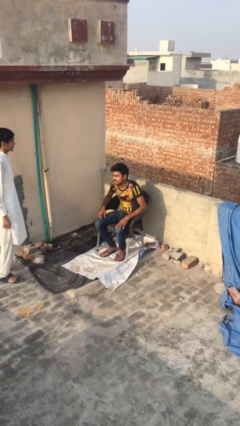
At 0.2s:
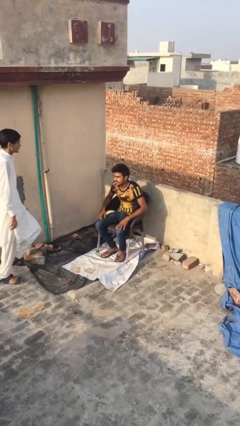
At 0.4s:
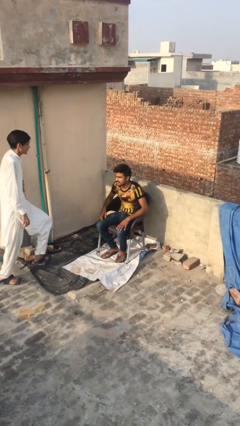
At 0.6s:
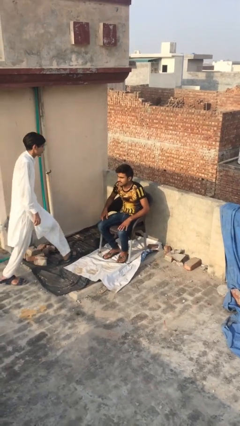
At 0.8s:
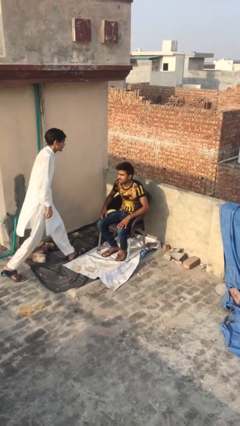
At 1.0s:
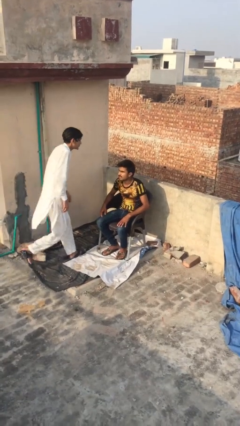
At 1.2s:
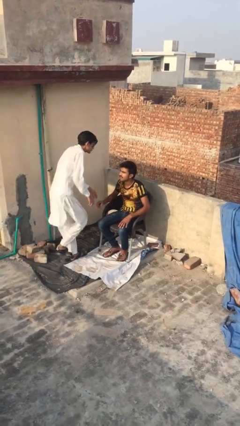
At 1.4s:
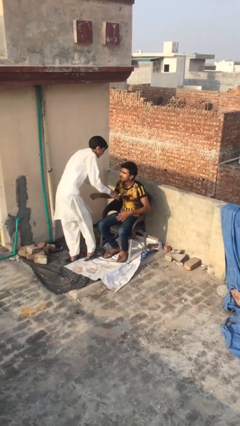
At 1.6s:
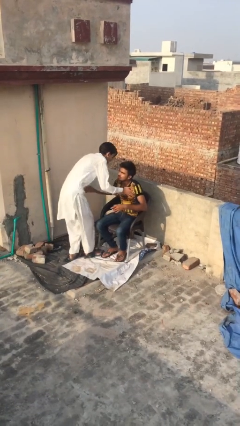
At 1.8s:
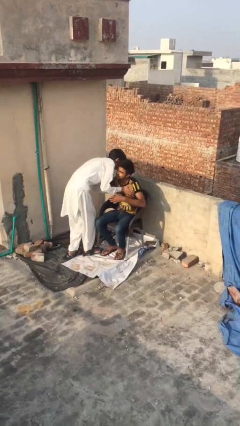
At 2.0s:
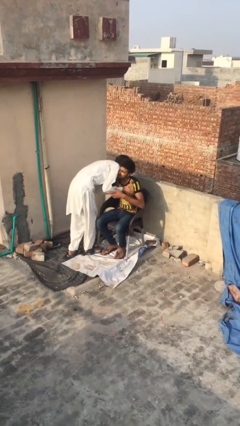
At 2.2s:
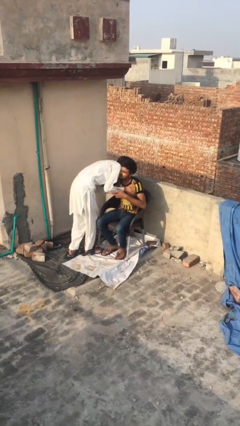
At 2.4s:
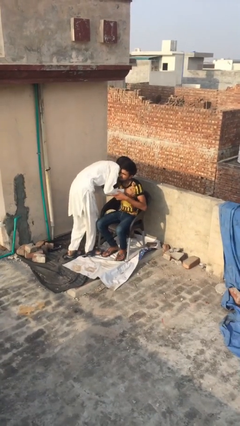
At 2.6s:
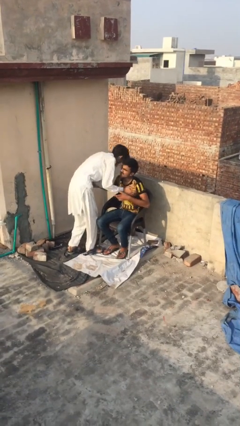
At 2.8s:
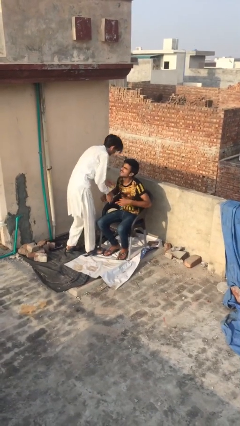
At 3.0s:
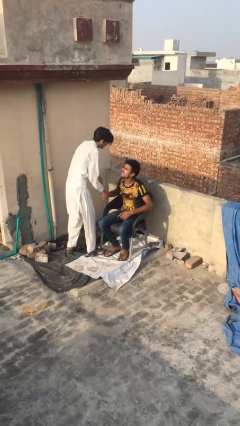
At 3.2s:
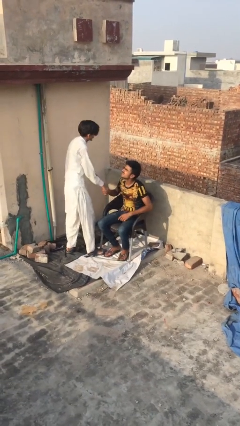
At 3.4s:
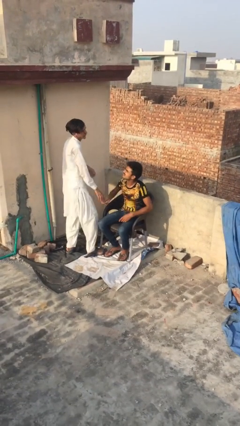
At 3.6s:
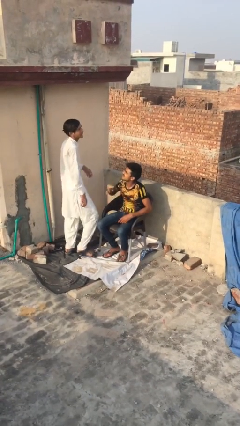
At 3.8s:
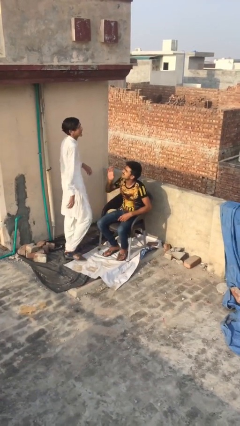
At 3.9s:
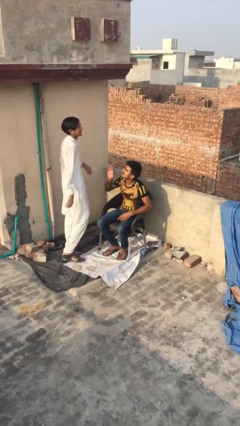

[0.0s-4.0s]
person embraces person

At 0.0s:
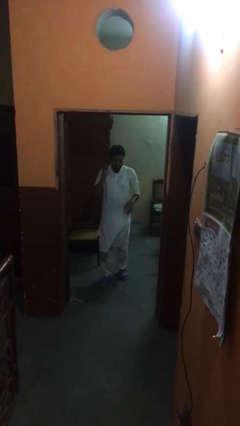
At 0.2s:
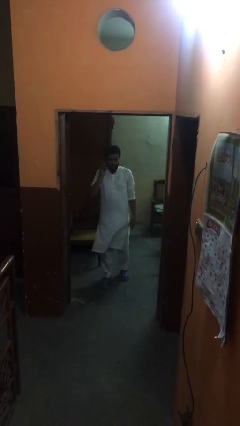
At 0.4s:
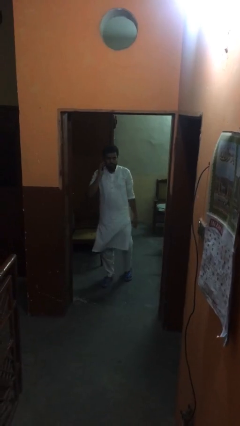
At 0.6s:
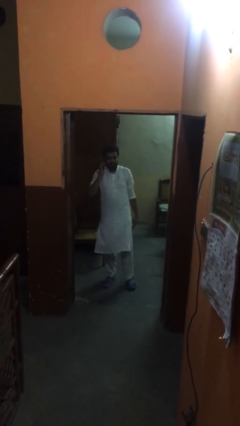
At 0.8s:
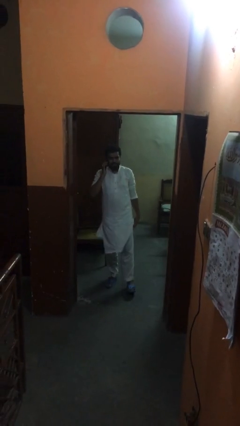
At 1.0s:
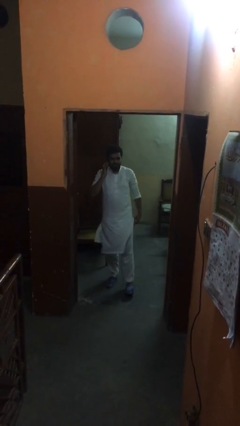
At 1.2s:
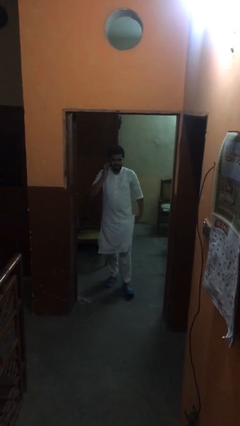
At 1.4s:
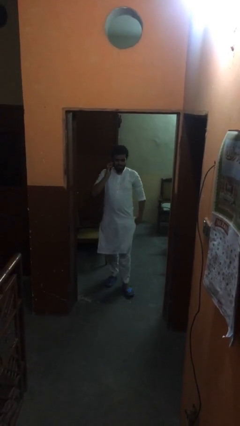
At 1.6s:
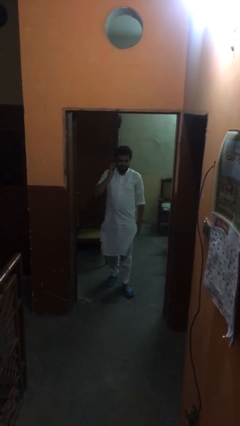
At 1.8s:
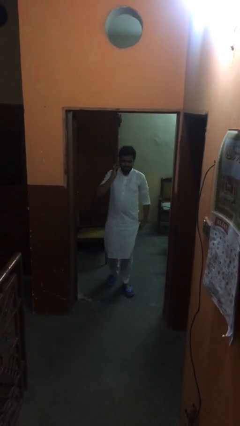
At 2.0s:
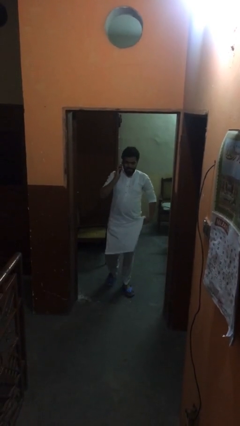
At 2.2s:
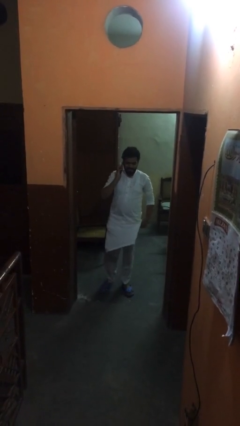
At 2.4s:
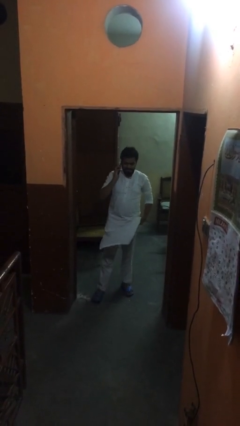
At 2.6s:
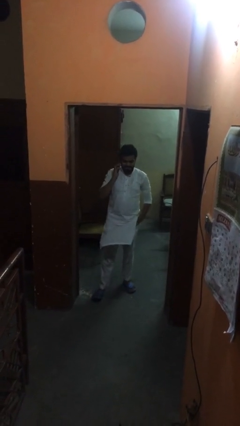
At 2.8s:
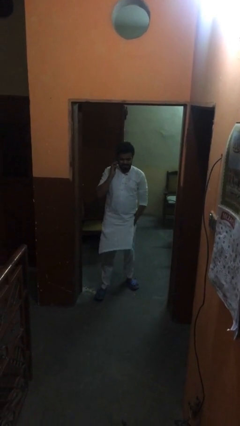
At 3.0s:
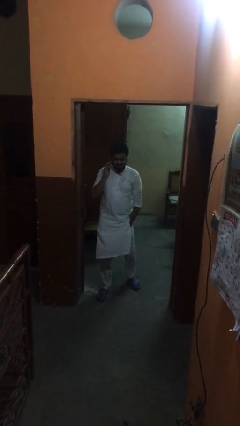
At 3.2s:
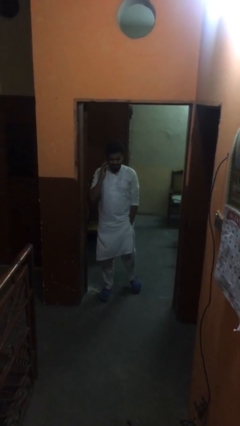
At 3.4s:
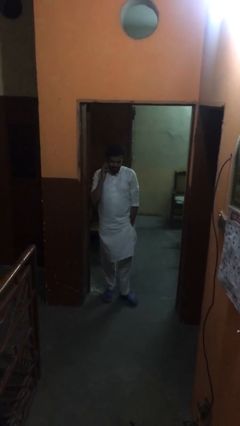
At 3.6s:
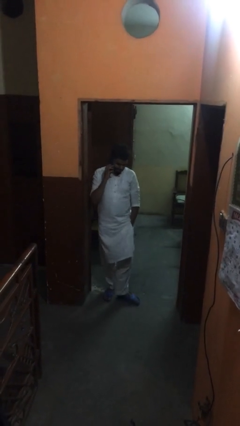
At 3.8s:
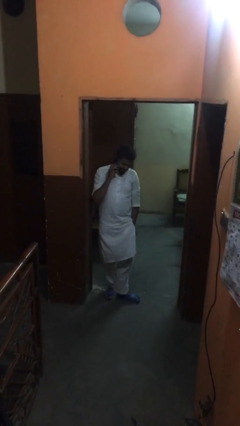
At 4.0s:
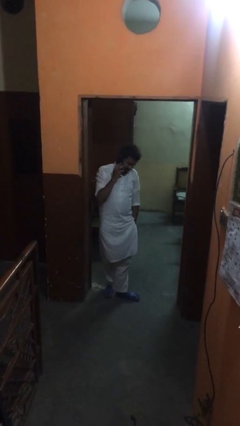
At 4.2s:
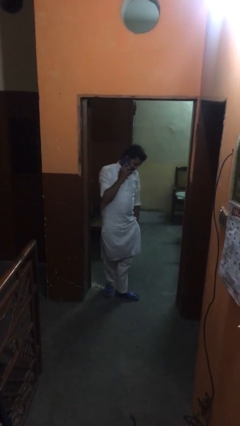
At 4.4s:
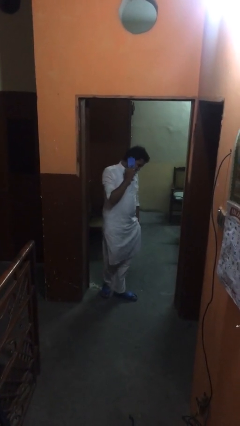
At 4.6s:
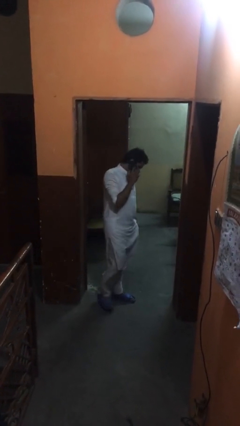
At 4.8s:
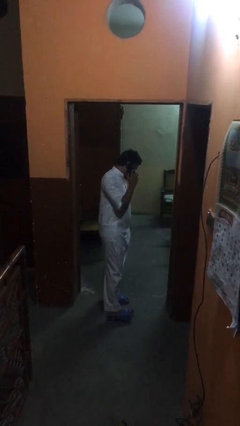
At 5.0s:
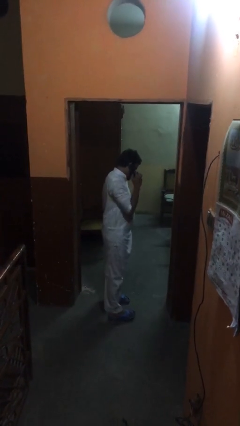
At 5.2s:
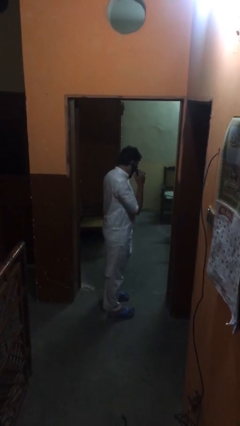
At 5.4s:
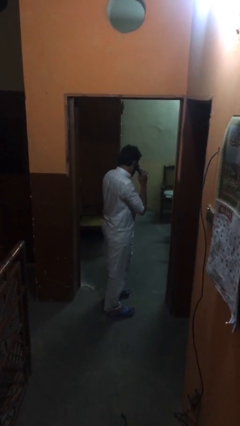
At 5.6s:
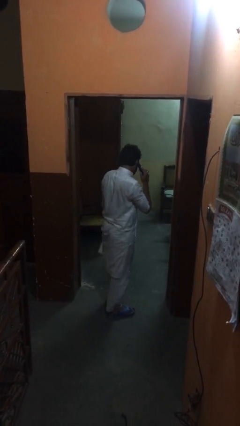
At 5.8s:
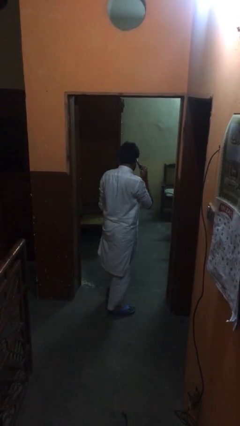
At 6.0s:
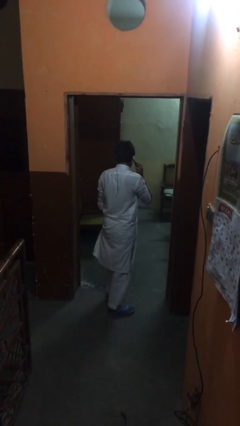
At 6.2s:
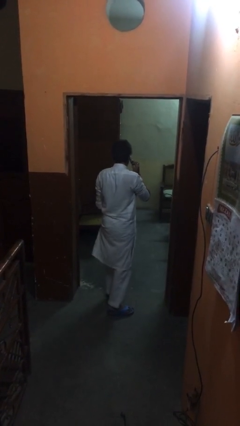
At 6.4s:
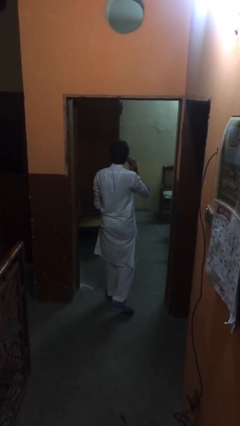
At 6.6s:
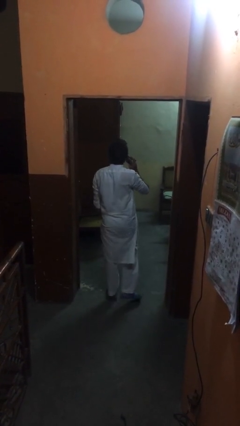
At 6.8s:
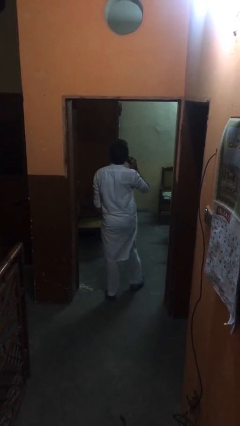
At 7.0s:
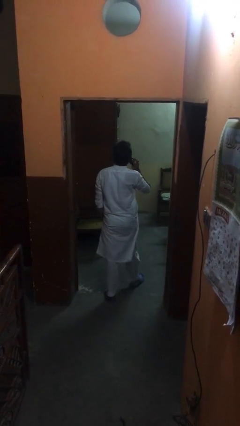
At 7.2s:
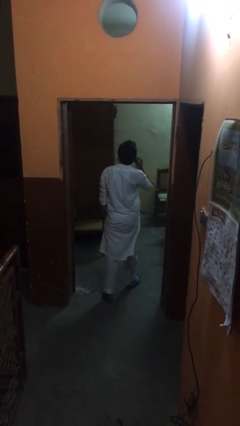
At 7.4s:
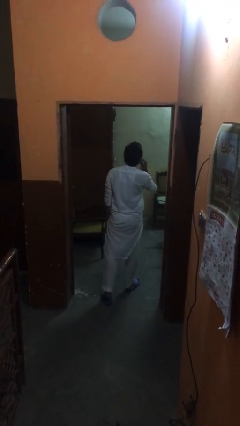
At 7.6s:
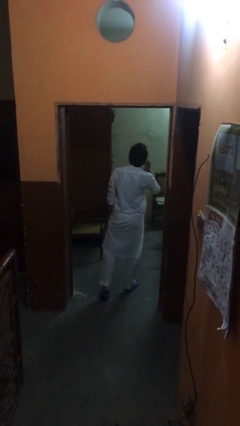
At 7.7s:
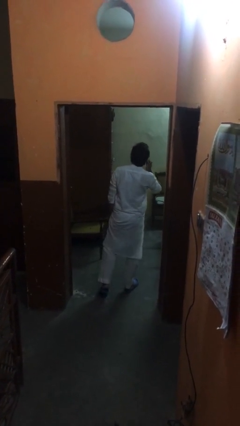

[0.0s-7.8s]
person talks on phone

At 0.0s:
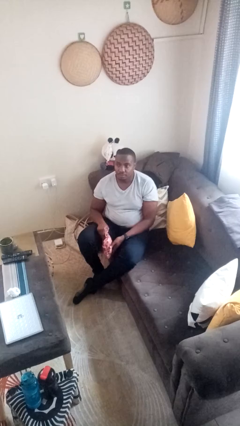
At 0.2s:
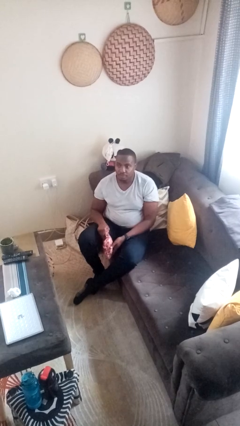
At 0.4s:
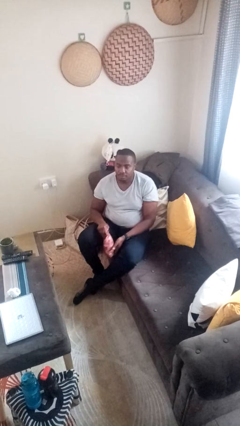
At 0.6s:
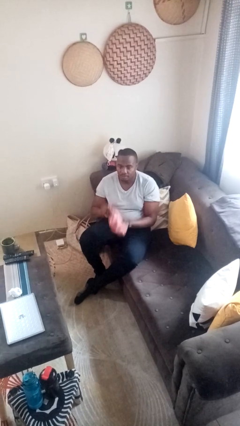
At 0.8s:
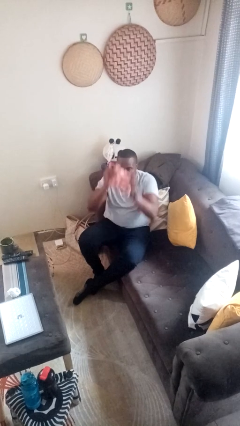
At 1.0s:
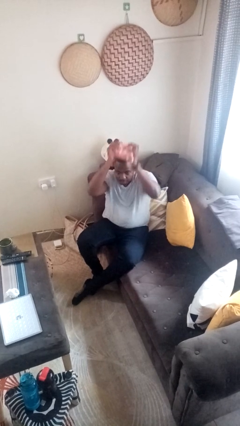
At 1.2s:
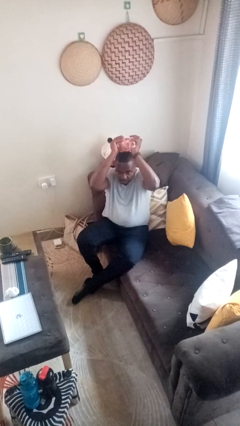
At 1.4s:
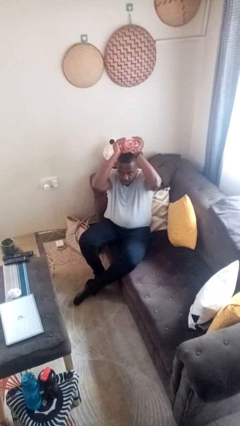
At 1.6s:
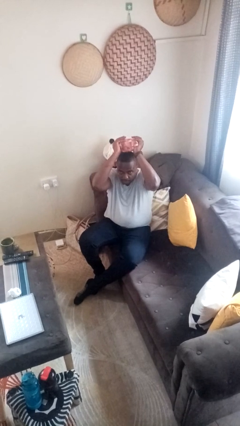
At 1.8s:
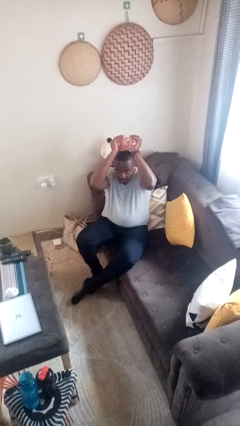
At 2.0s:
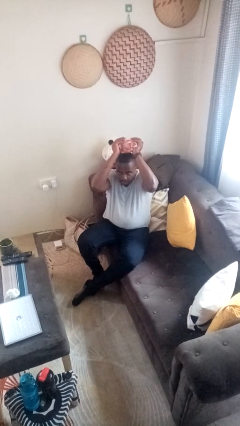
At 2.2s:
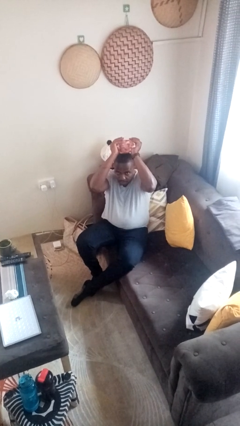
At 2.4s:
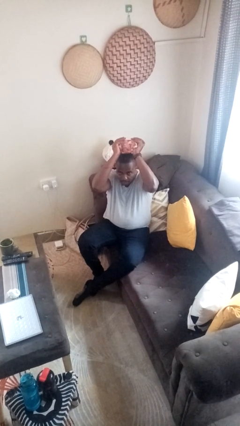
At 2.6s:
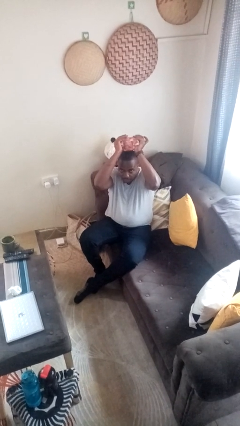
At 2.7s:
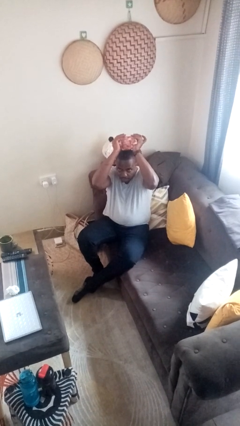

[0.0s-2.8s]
person holds object above head

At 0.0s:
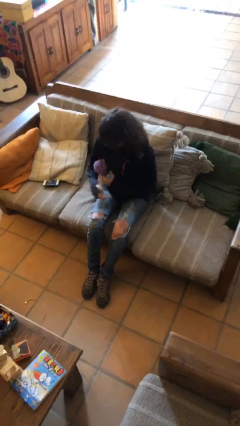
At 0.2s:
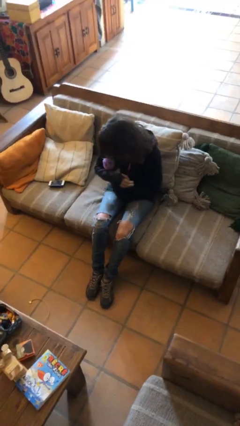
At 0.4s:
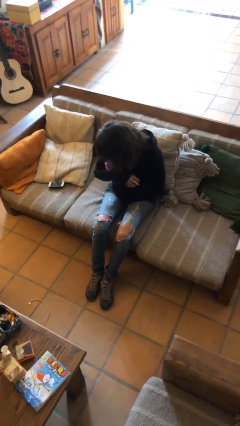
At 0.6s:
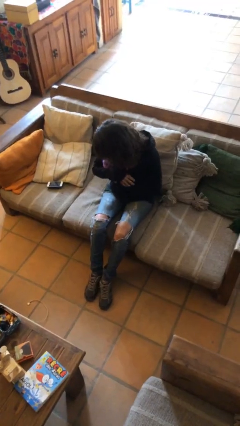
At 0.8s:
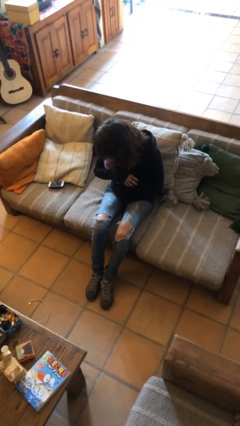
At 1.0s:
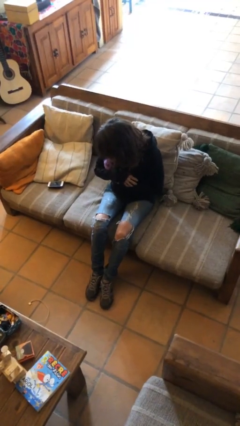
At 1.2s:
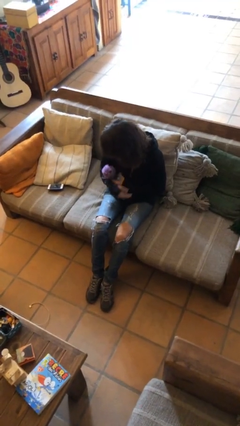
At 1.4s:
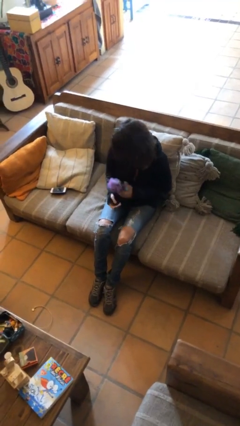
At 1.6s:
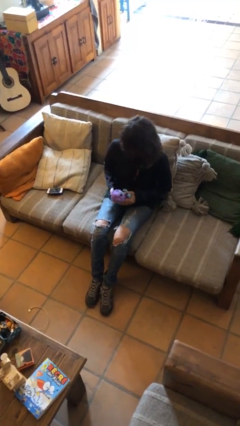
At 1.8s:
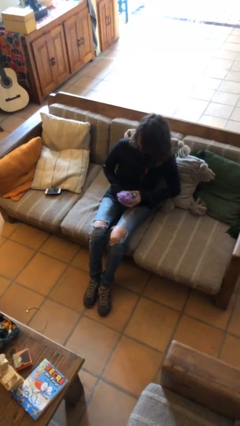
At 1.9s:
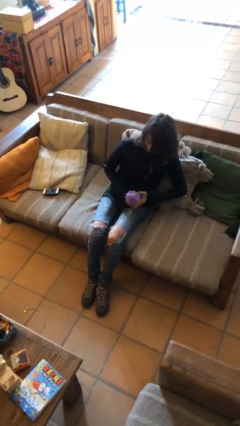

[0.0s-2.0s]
person hugs stuffed animal

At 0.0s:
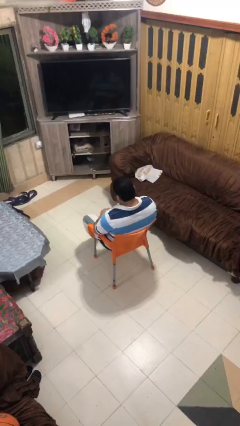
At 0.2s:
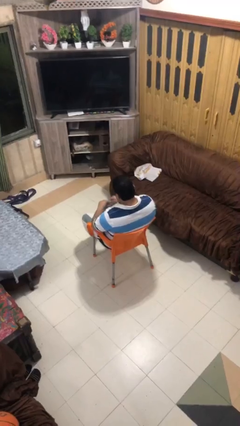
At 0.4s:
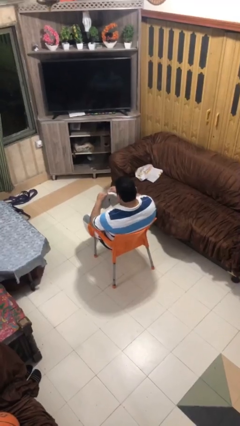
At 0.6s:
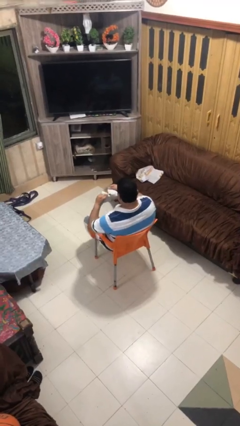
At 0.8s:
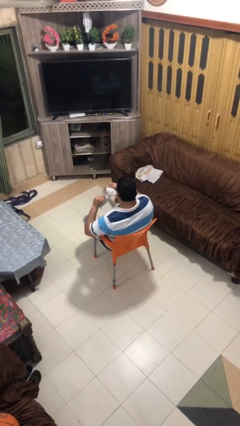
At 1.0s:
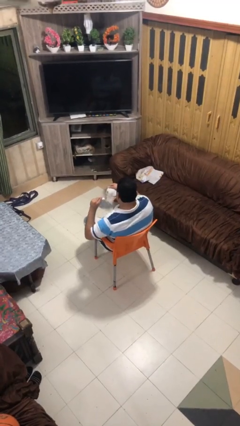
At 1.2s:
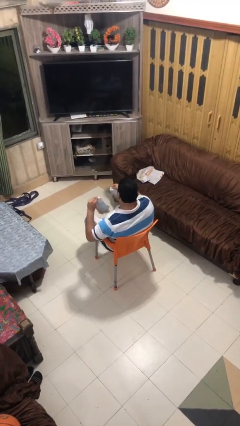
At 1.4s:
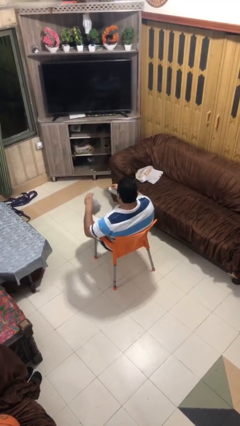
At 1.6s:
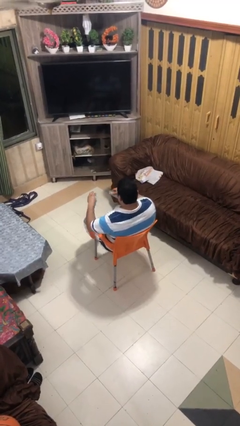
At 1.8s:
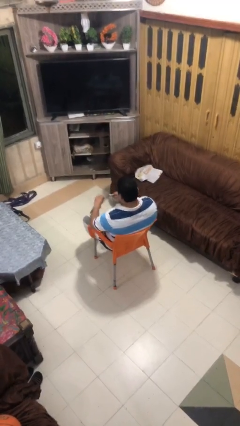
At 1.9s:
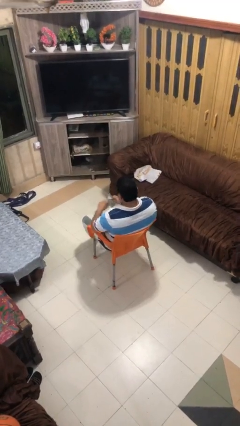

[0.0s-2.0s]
person tears paper
